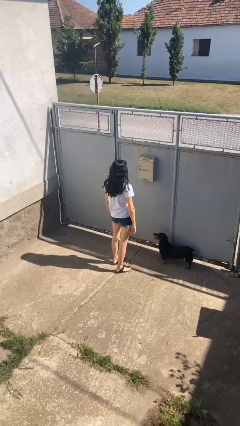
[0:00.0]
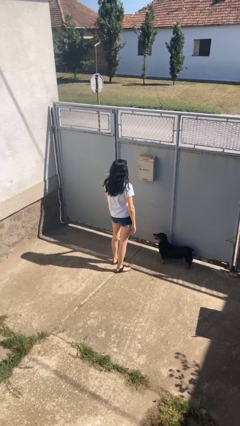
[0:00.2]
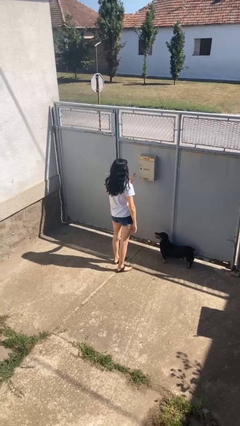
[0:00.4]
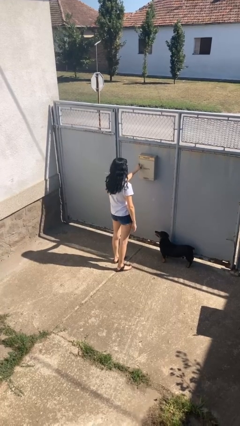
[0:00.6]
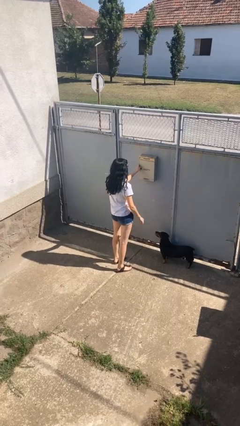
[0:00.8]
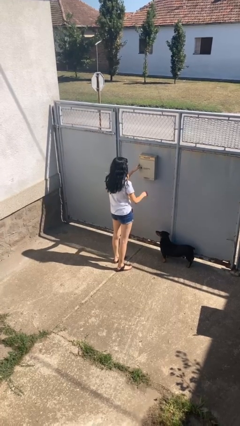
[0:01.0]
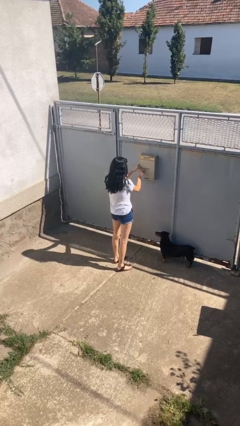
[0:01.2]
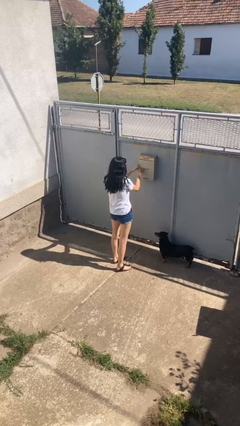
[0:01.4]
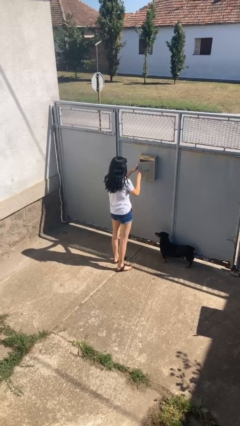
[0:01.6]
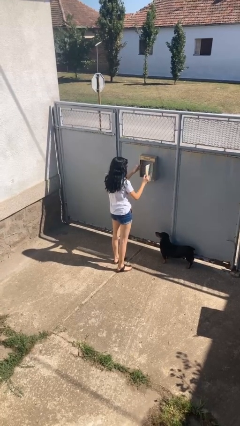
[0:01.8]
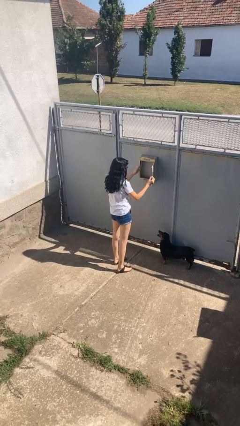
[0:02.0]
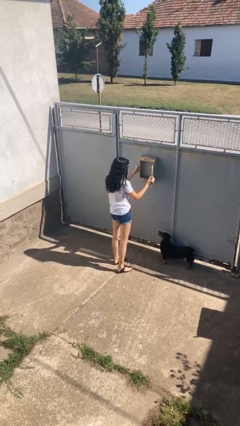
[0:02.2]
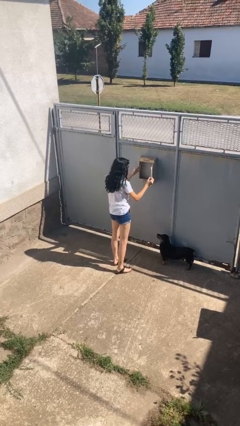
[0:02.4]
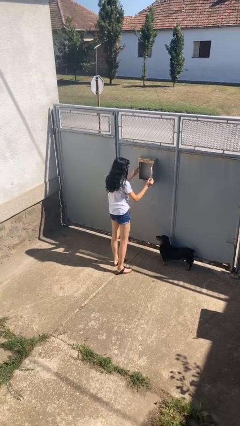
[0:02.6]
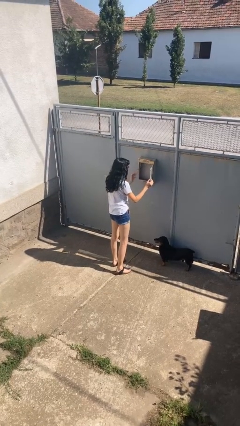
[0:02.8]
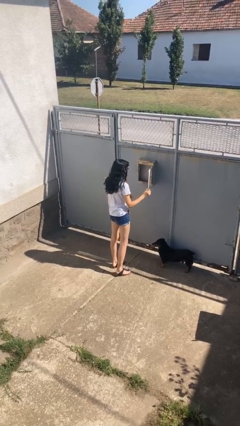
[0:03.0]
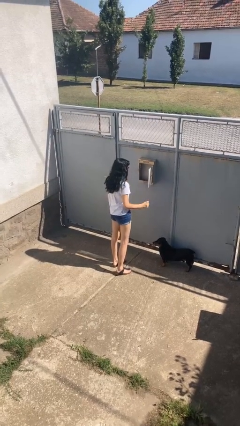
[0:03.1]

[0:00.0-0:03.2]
person opens mailbox

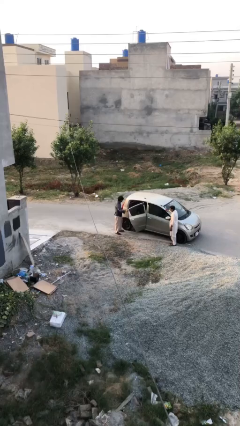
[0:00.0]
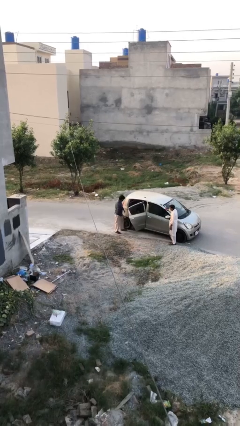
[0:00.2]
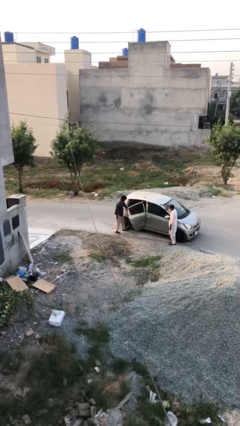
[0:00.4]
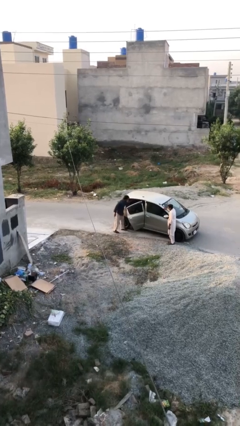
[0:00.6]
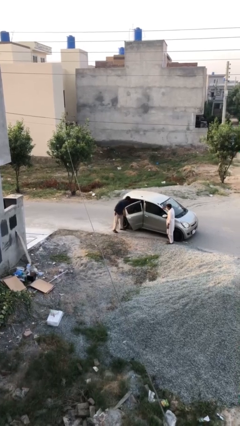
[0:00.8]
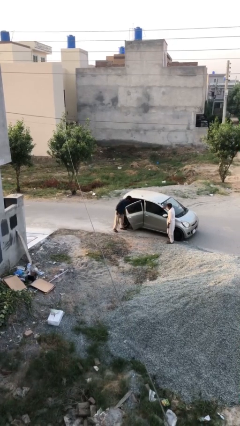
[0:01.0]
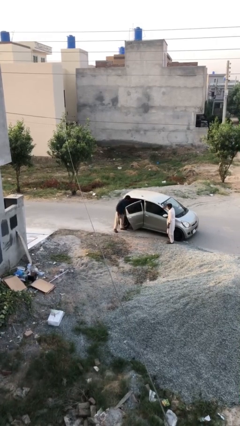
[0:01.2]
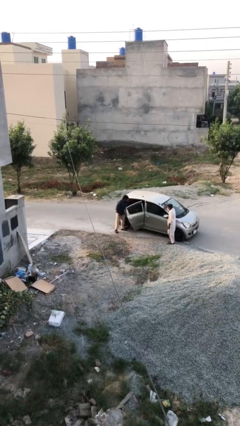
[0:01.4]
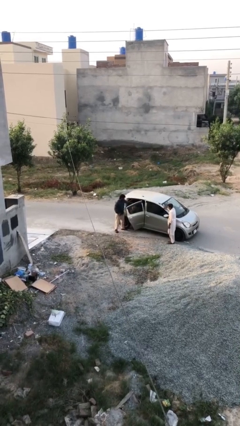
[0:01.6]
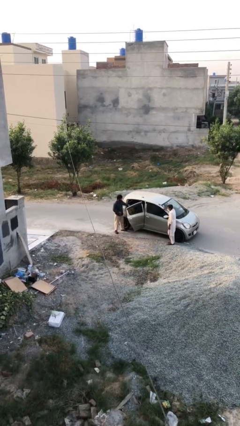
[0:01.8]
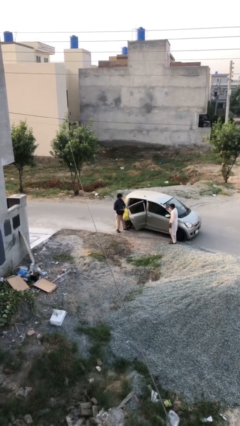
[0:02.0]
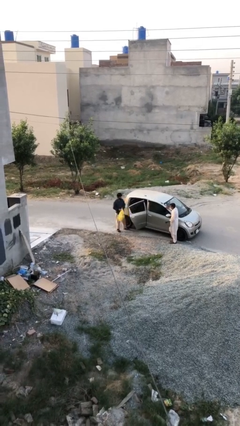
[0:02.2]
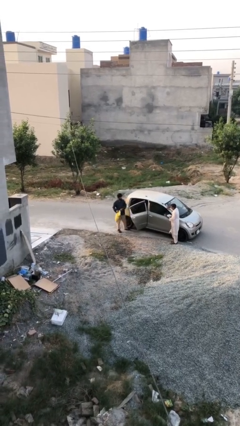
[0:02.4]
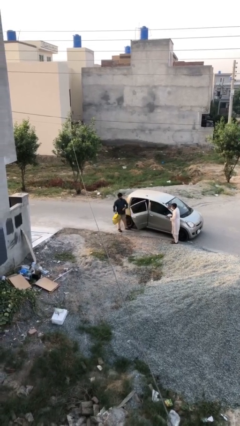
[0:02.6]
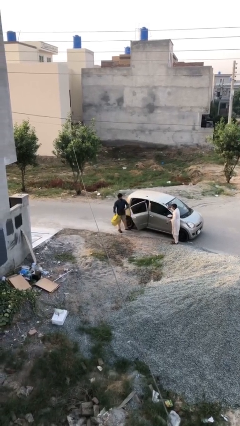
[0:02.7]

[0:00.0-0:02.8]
person unloads car

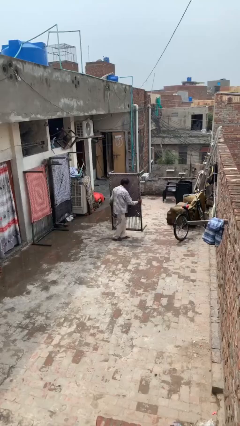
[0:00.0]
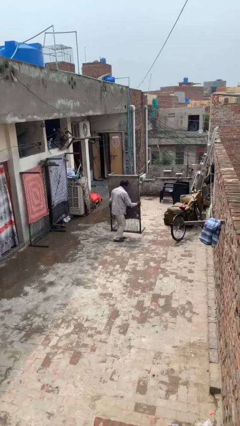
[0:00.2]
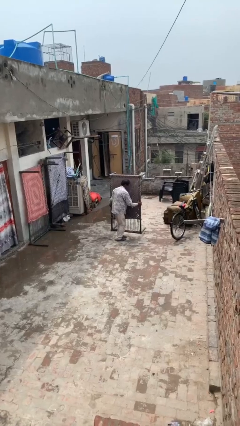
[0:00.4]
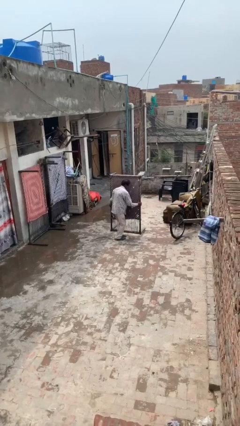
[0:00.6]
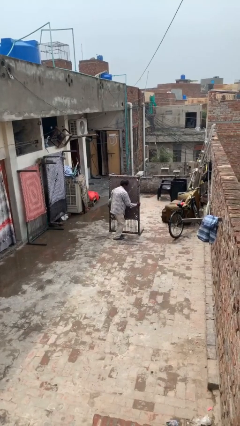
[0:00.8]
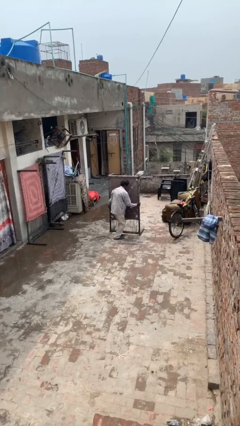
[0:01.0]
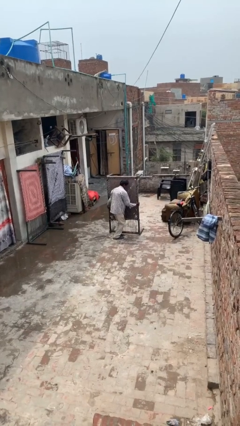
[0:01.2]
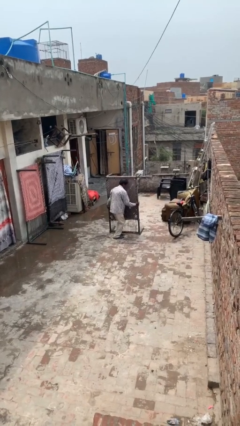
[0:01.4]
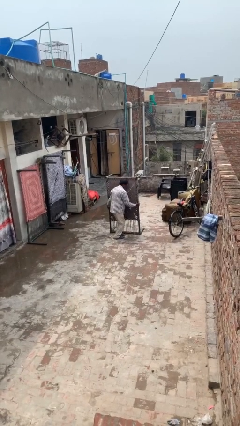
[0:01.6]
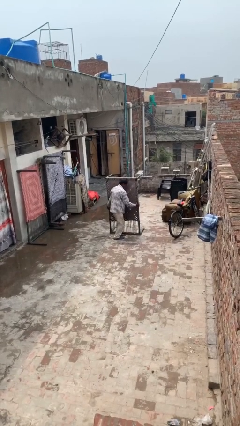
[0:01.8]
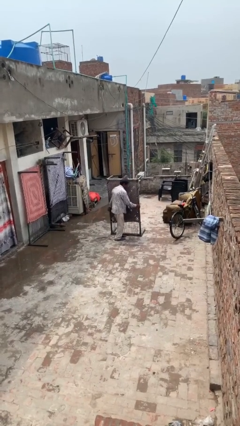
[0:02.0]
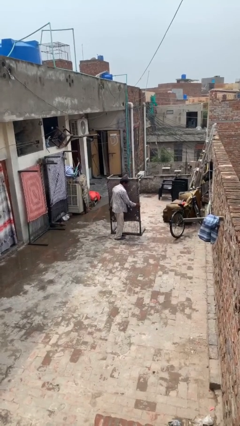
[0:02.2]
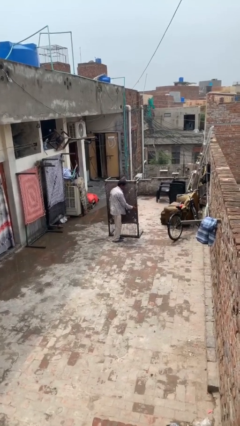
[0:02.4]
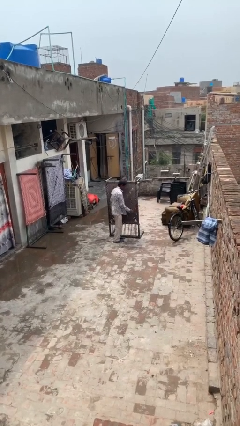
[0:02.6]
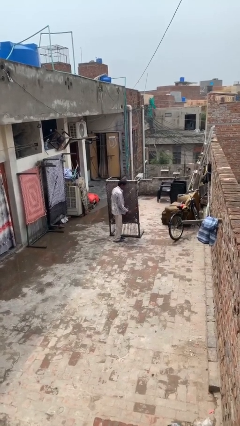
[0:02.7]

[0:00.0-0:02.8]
person puts down object on floor

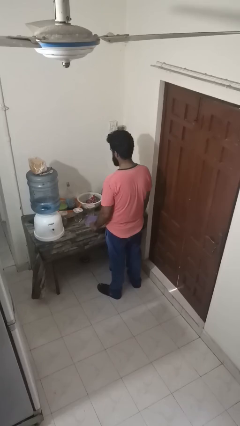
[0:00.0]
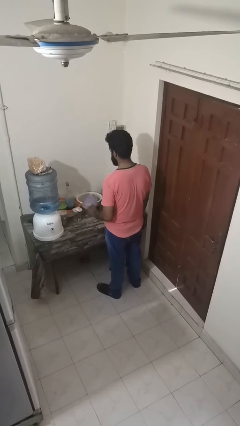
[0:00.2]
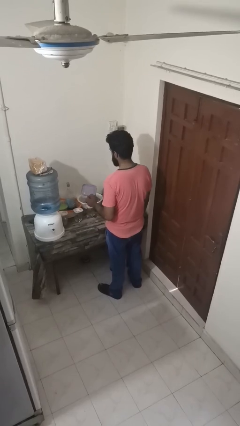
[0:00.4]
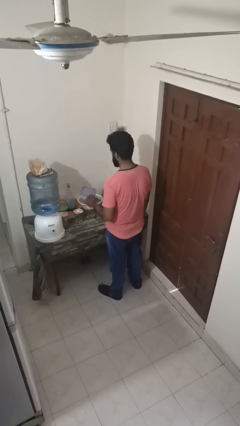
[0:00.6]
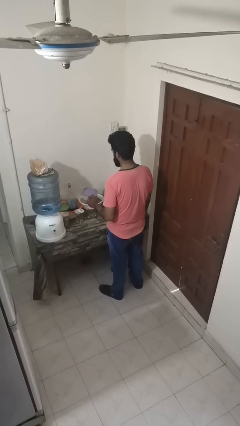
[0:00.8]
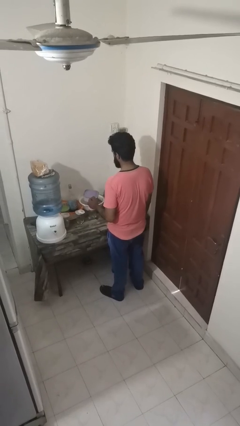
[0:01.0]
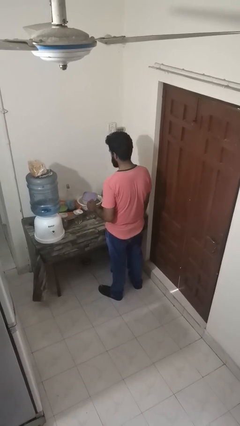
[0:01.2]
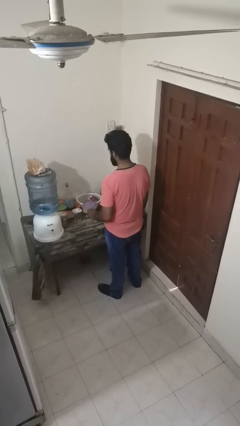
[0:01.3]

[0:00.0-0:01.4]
person picks up object from countertop

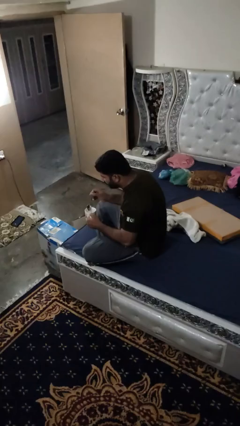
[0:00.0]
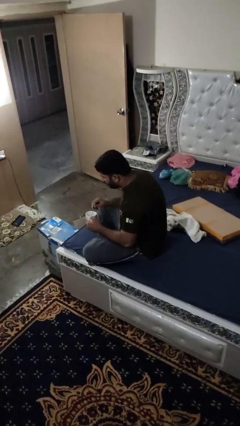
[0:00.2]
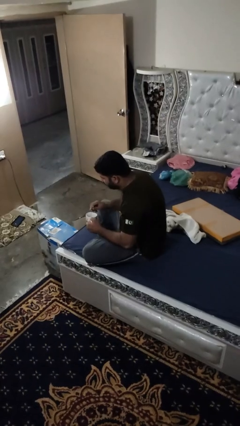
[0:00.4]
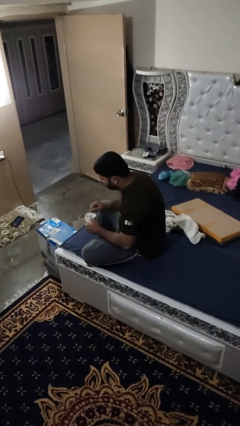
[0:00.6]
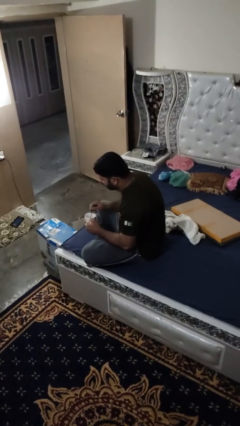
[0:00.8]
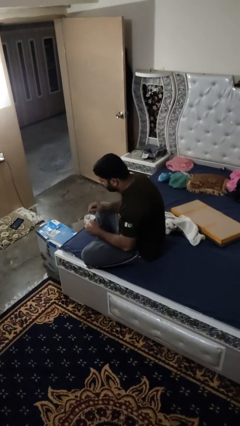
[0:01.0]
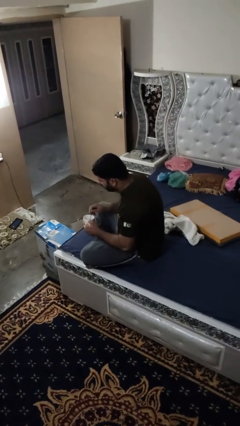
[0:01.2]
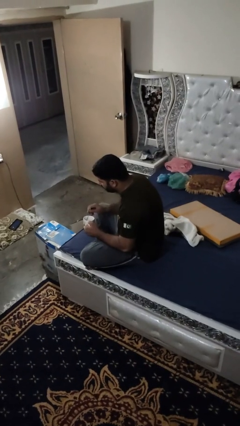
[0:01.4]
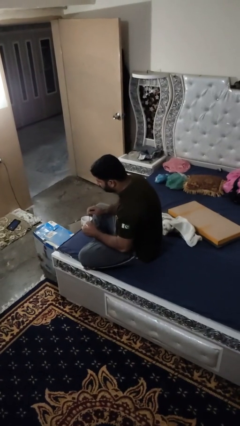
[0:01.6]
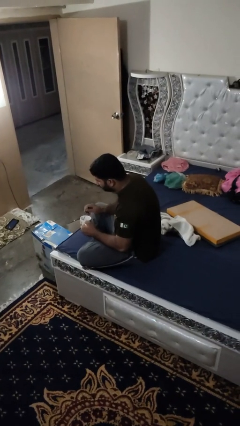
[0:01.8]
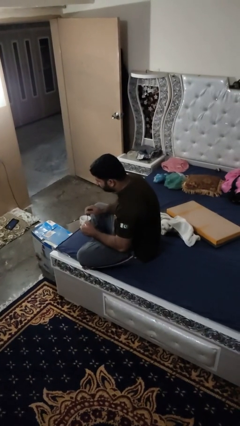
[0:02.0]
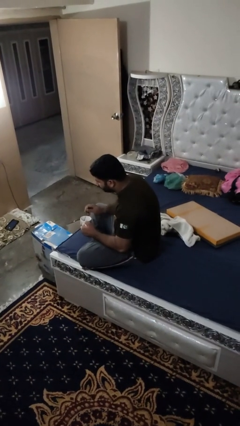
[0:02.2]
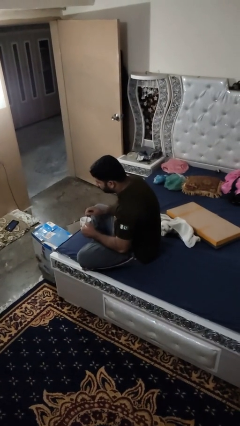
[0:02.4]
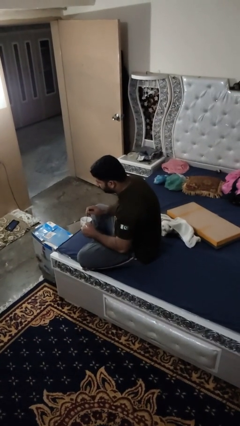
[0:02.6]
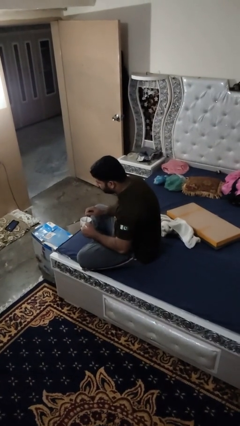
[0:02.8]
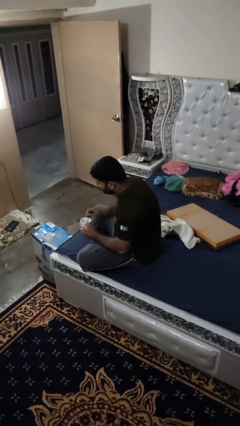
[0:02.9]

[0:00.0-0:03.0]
person stirs mug

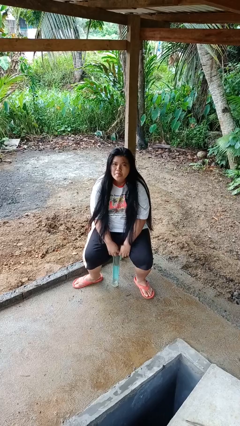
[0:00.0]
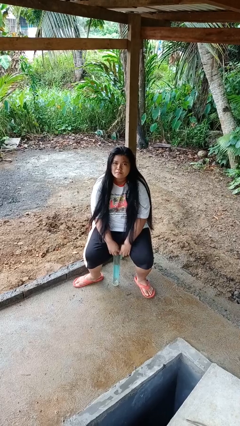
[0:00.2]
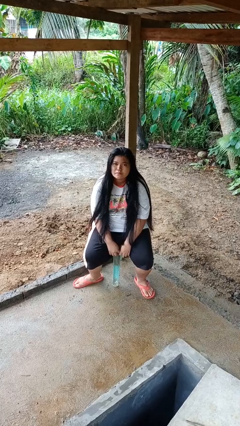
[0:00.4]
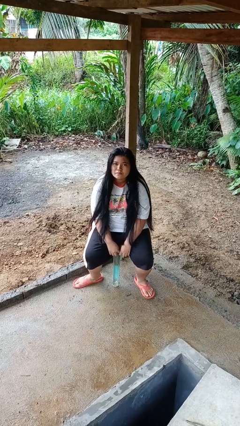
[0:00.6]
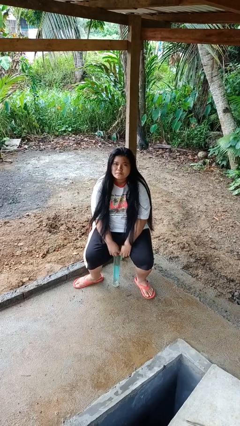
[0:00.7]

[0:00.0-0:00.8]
person sticks out tongue

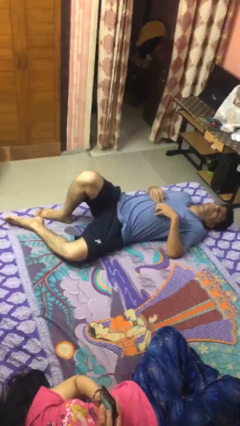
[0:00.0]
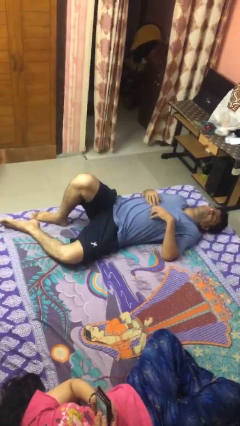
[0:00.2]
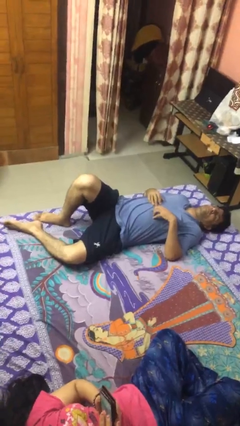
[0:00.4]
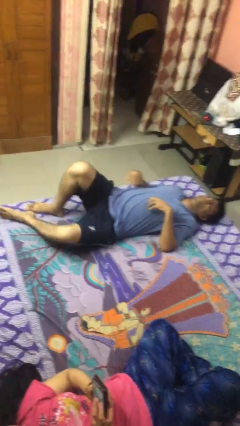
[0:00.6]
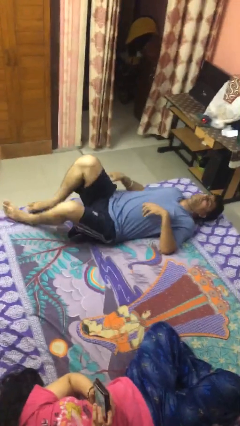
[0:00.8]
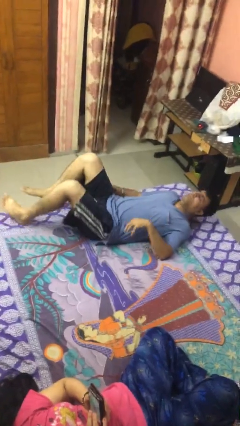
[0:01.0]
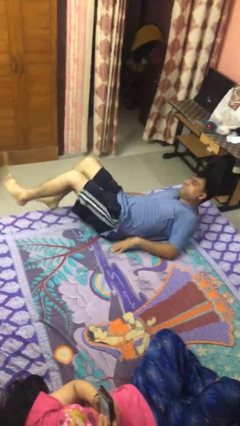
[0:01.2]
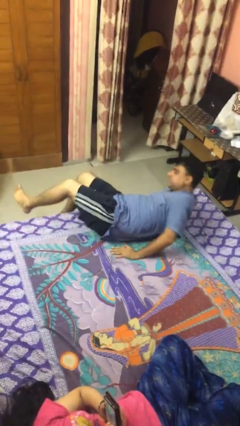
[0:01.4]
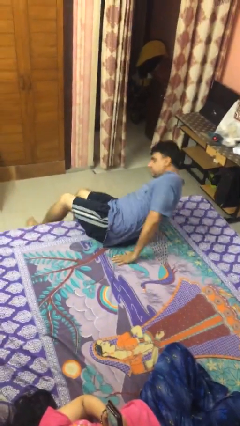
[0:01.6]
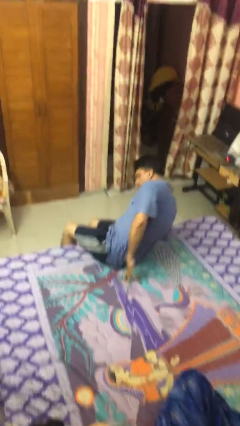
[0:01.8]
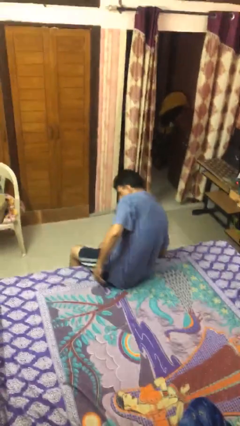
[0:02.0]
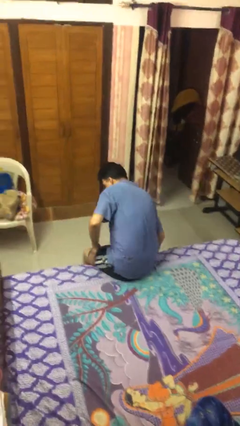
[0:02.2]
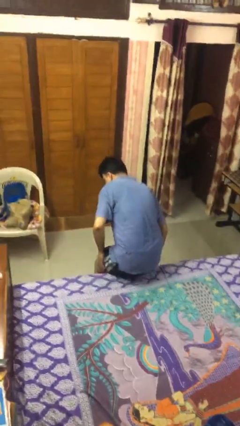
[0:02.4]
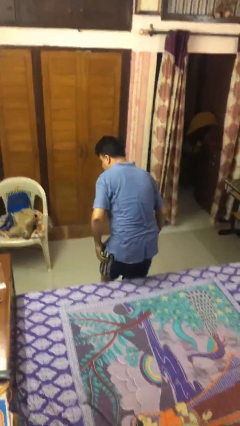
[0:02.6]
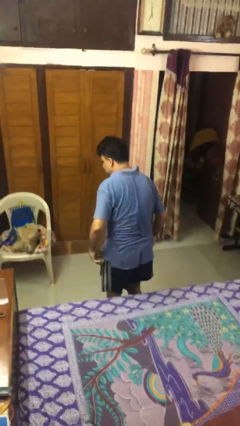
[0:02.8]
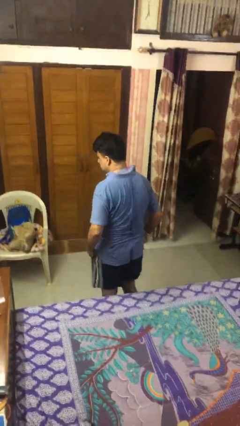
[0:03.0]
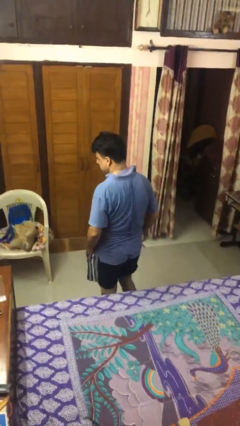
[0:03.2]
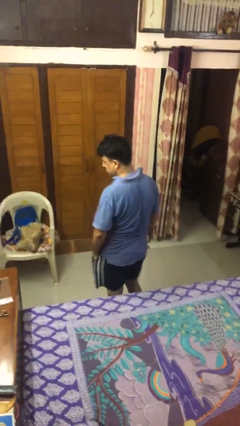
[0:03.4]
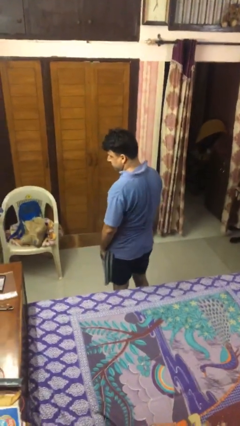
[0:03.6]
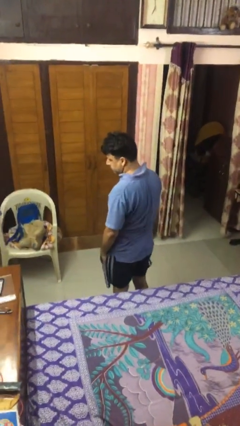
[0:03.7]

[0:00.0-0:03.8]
person stands up
